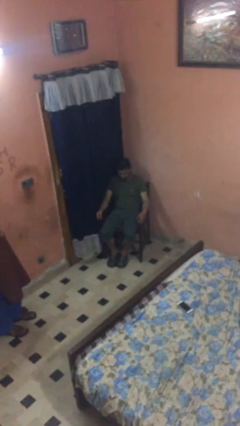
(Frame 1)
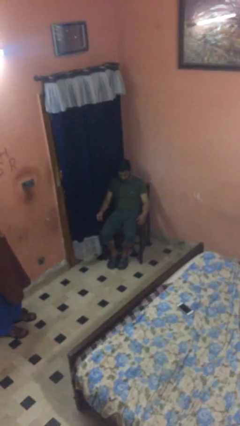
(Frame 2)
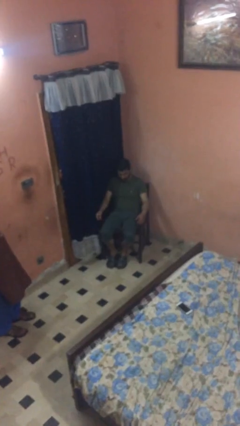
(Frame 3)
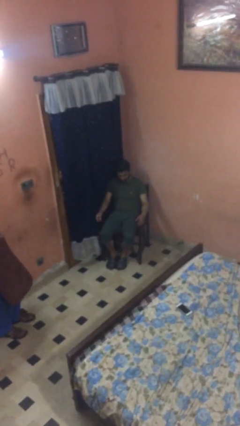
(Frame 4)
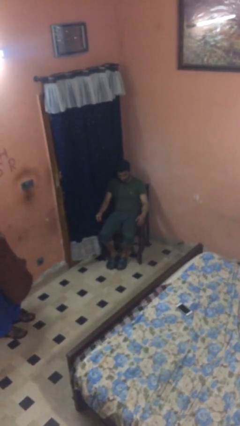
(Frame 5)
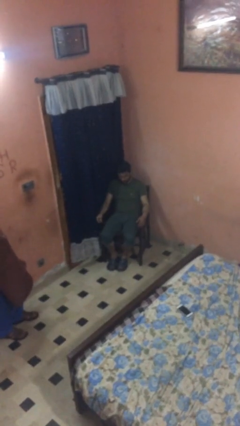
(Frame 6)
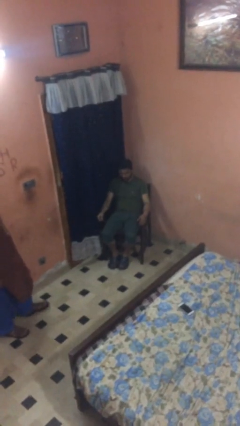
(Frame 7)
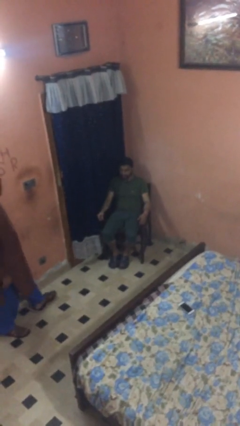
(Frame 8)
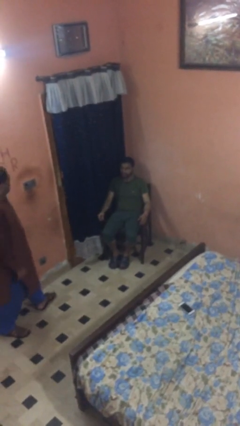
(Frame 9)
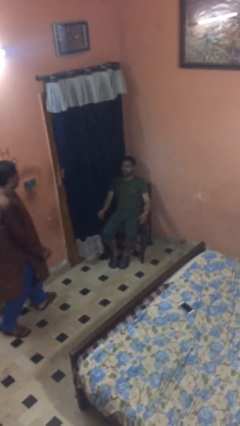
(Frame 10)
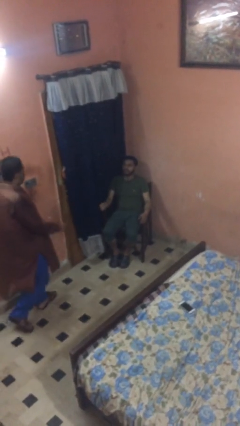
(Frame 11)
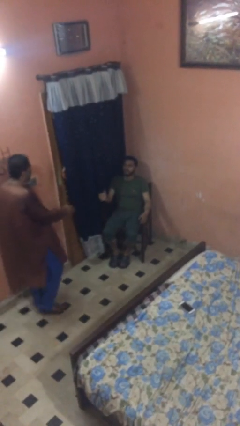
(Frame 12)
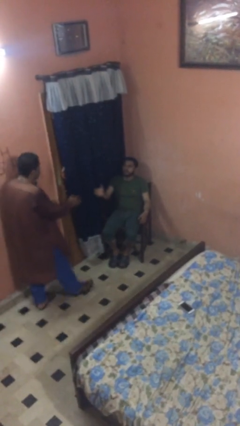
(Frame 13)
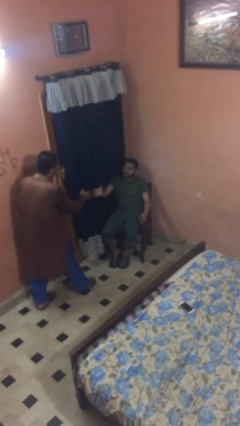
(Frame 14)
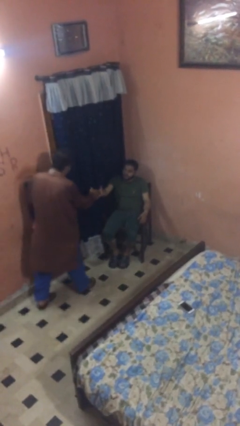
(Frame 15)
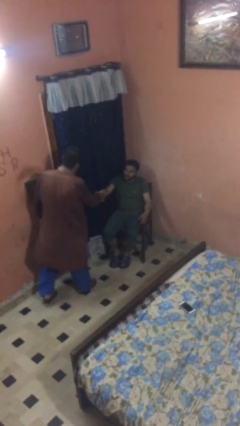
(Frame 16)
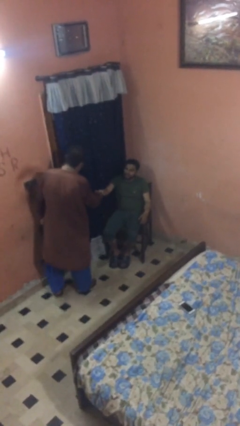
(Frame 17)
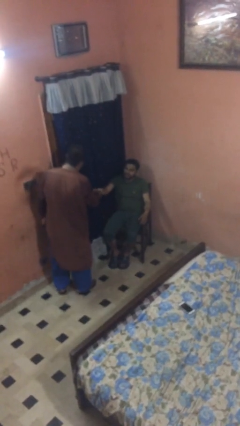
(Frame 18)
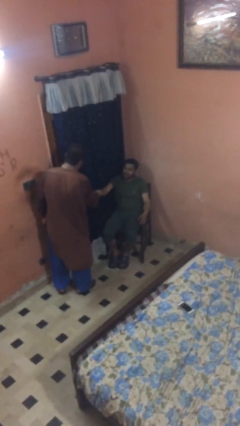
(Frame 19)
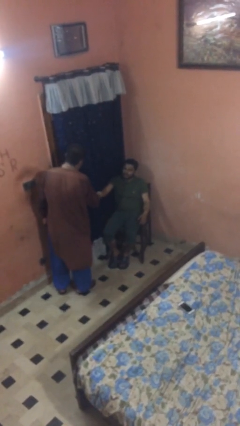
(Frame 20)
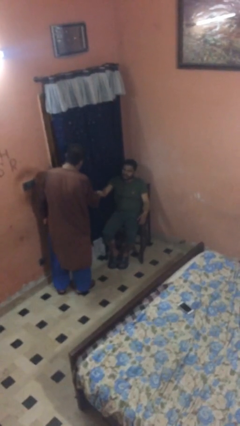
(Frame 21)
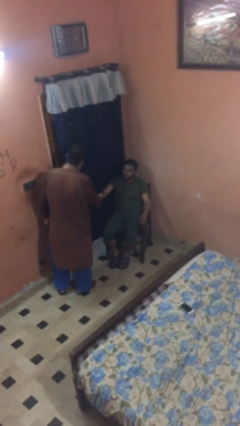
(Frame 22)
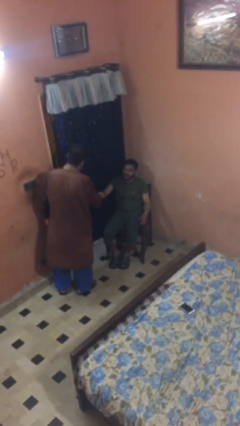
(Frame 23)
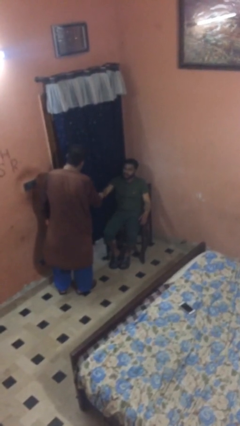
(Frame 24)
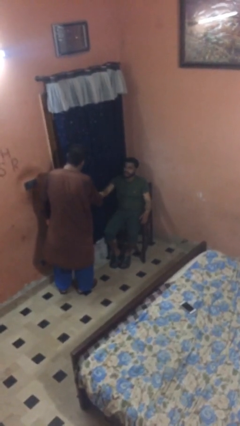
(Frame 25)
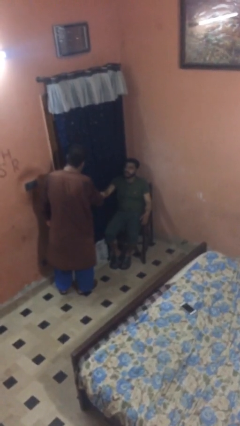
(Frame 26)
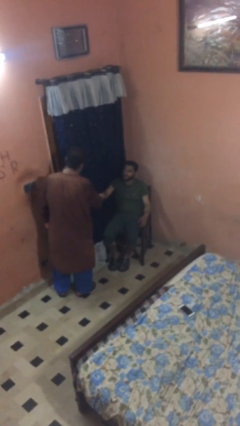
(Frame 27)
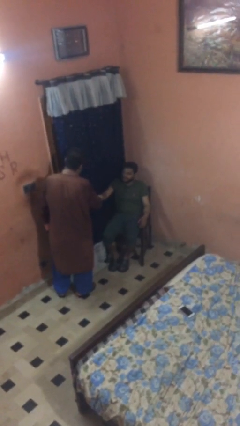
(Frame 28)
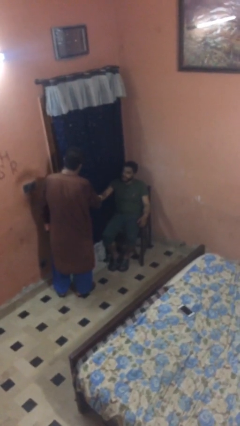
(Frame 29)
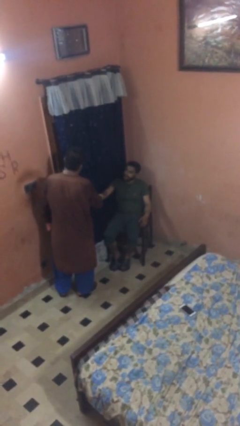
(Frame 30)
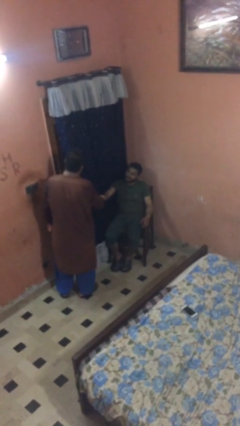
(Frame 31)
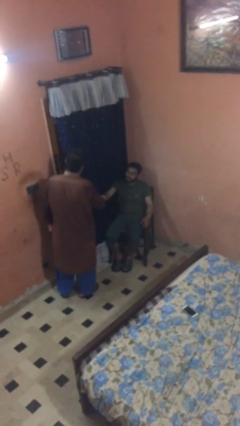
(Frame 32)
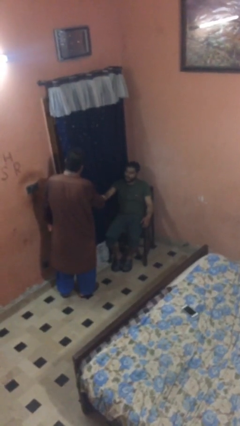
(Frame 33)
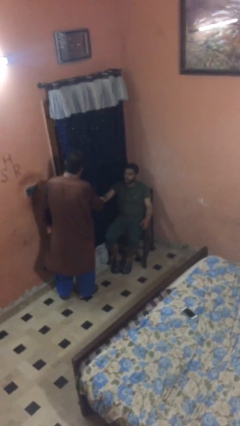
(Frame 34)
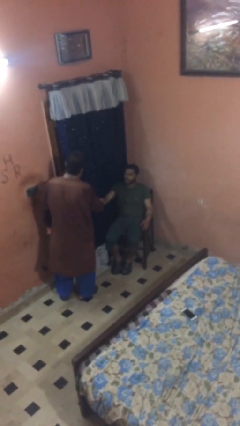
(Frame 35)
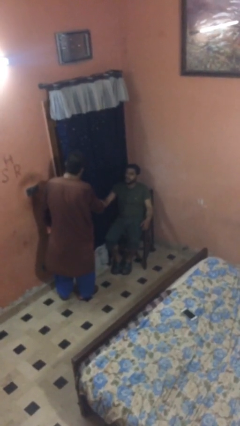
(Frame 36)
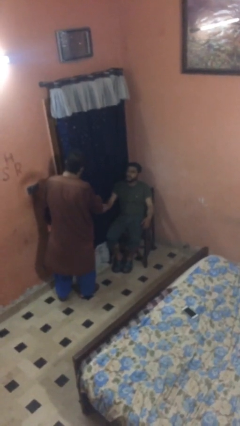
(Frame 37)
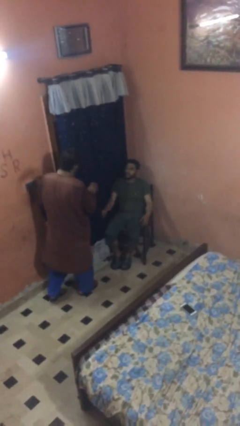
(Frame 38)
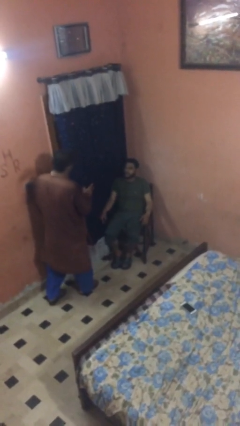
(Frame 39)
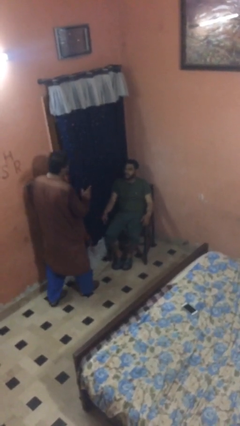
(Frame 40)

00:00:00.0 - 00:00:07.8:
person shakes hand

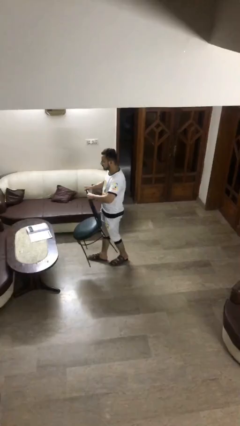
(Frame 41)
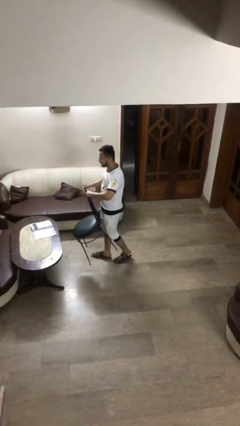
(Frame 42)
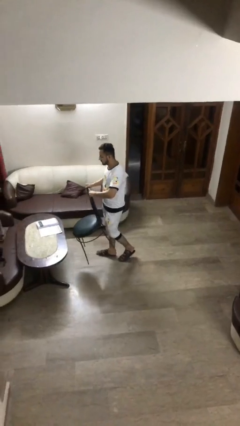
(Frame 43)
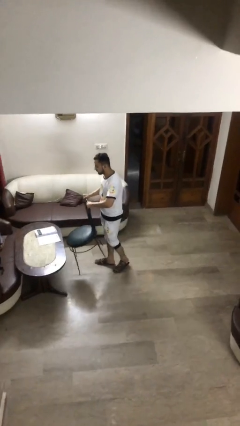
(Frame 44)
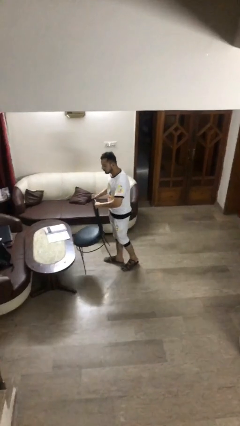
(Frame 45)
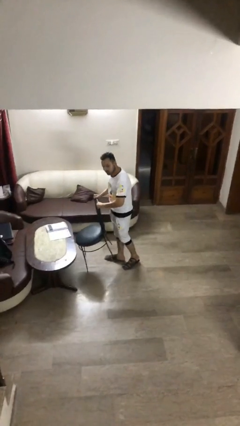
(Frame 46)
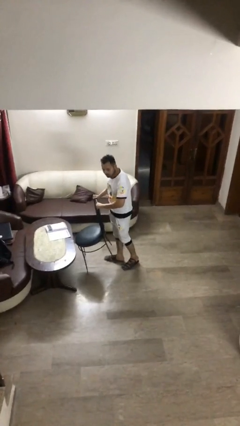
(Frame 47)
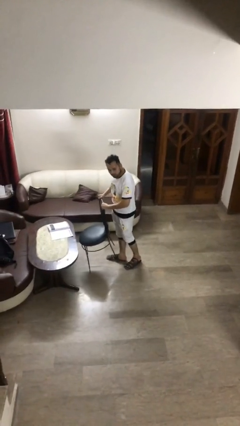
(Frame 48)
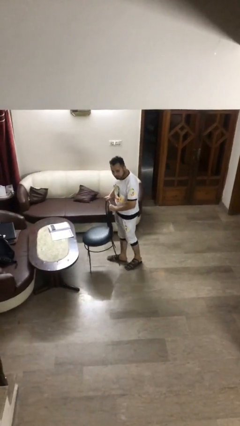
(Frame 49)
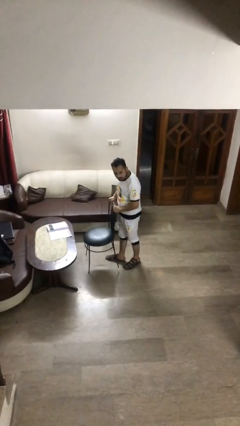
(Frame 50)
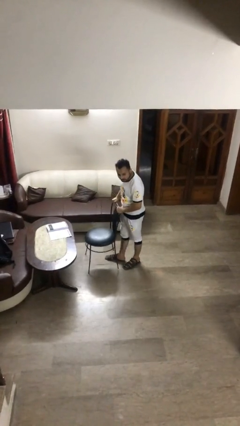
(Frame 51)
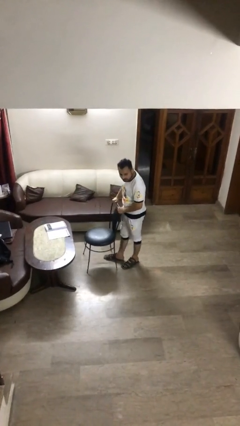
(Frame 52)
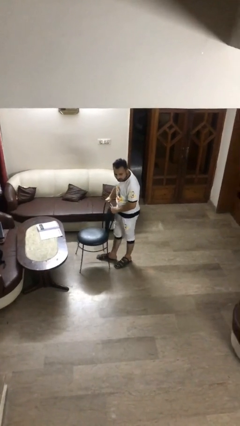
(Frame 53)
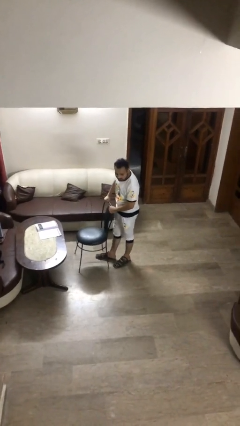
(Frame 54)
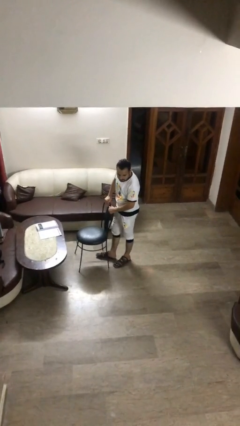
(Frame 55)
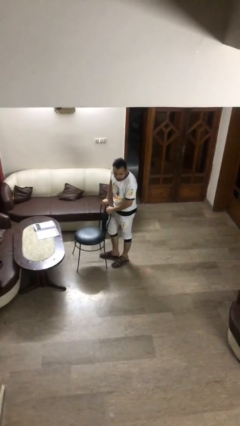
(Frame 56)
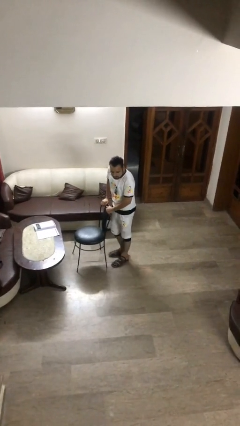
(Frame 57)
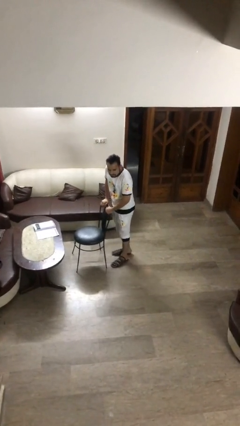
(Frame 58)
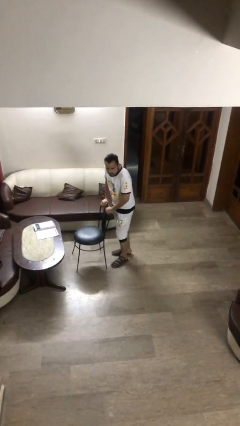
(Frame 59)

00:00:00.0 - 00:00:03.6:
person puts down object on floor

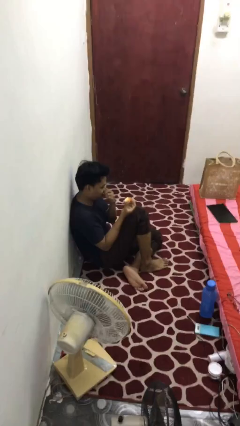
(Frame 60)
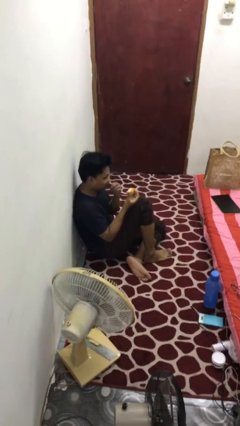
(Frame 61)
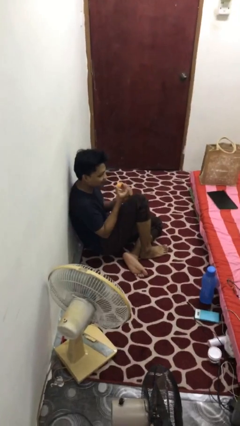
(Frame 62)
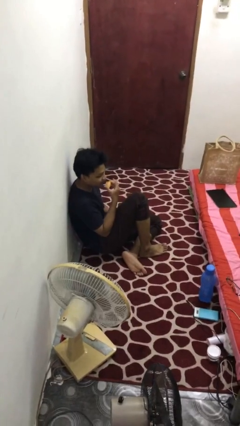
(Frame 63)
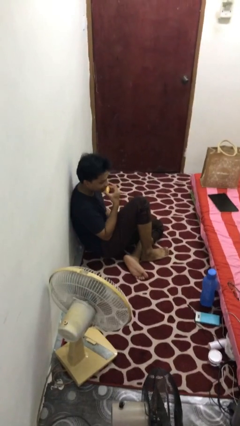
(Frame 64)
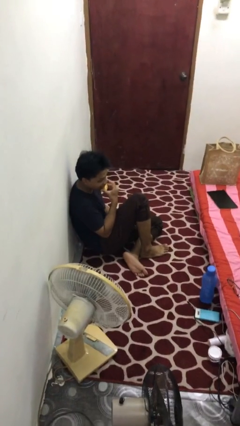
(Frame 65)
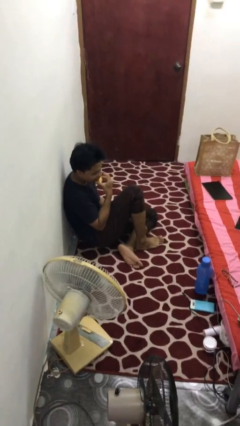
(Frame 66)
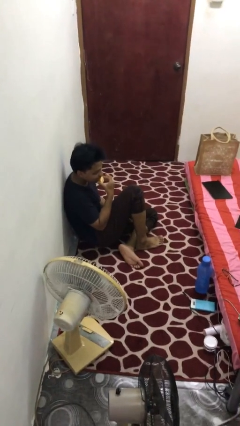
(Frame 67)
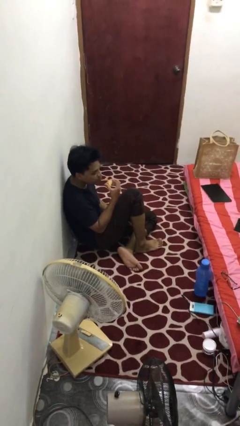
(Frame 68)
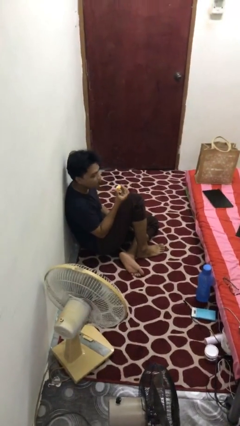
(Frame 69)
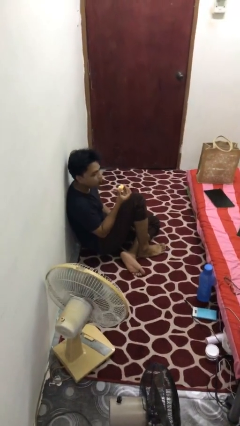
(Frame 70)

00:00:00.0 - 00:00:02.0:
person eats apple

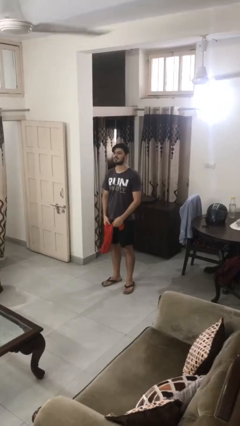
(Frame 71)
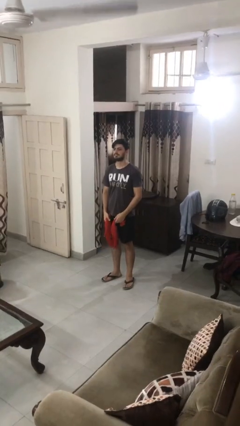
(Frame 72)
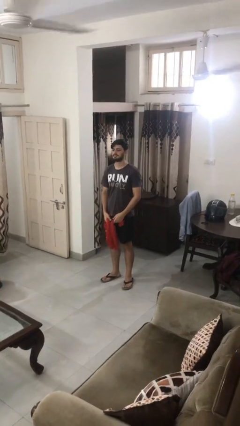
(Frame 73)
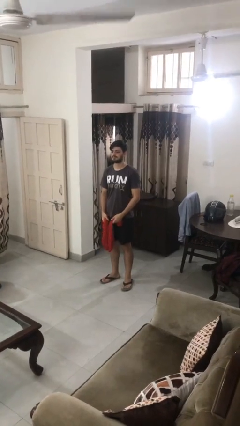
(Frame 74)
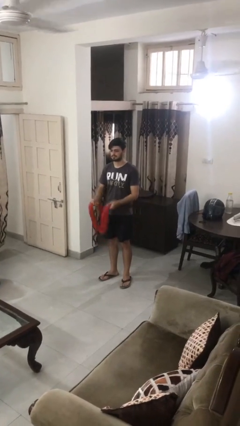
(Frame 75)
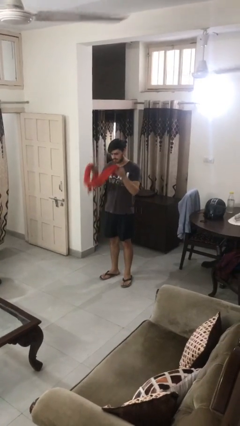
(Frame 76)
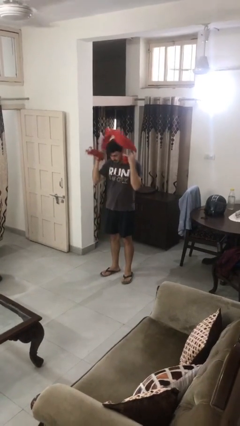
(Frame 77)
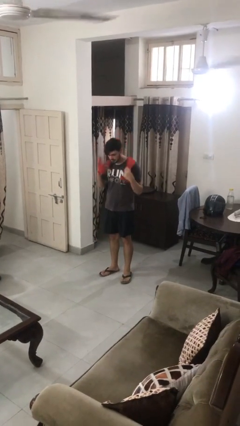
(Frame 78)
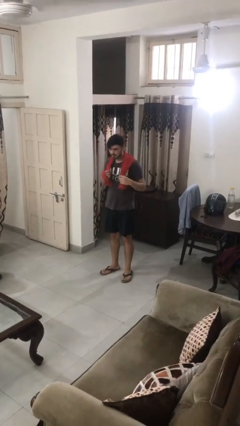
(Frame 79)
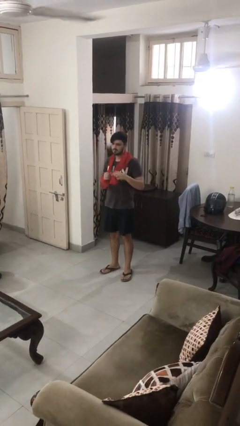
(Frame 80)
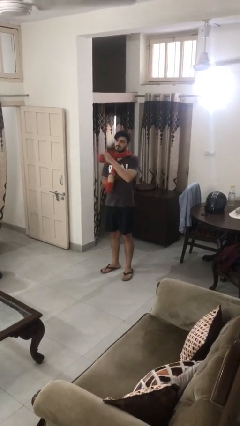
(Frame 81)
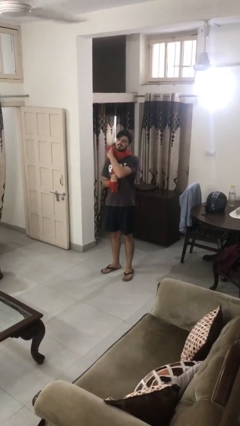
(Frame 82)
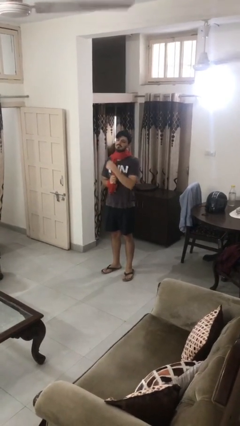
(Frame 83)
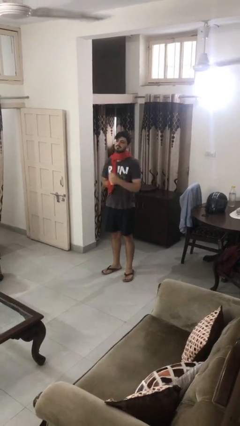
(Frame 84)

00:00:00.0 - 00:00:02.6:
person puts on scarf

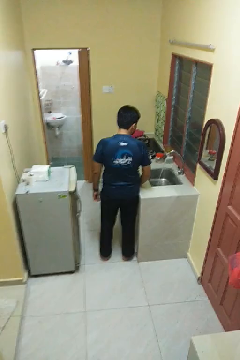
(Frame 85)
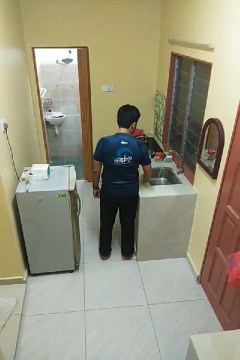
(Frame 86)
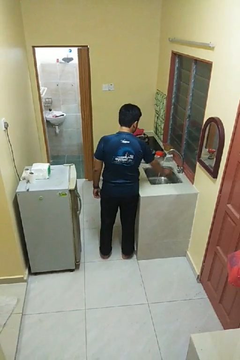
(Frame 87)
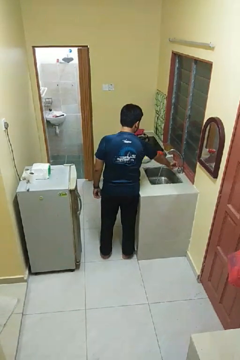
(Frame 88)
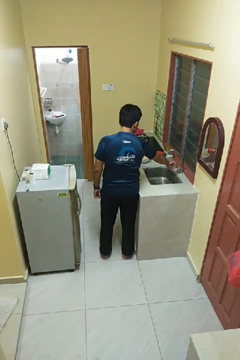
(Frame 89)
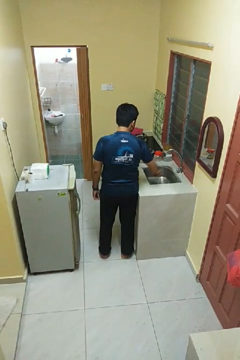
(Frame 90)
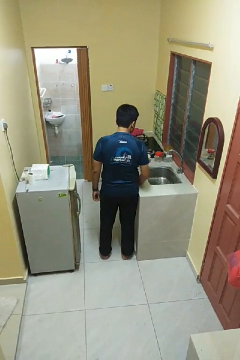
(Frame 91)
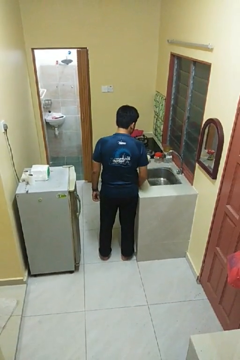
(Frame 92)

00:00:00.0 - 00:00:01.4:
person turns off faucet

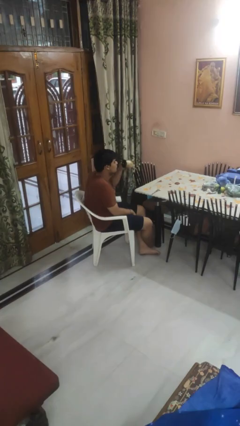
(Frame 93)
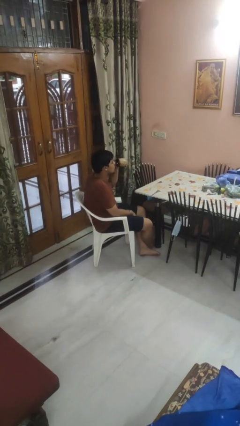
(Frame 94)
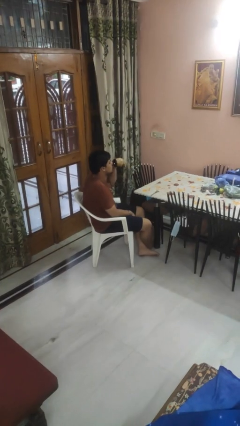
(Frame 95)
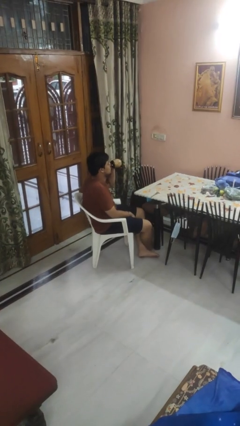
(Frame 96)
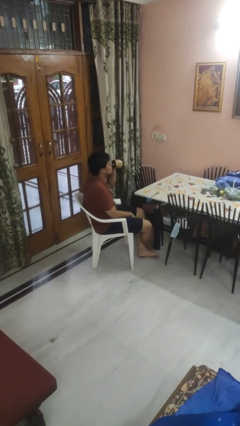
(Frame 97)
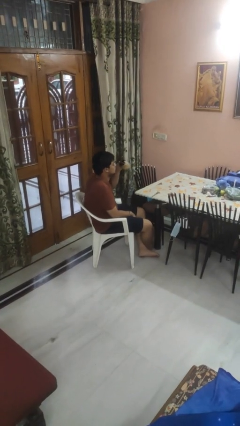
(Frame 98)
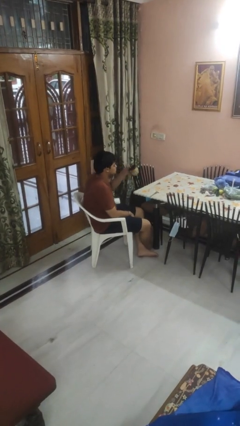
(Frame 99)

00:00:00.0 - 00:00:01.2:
person drinks from mug
